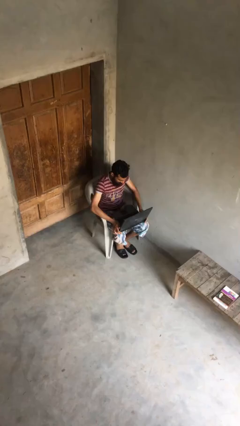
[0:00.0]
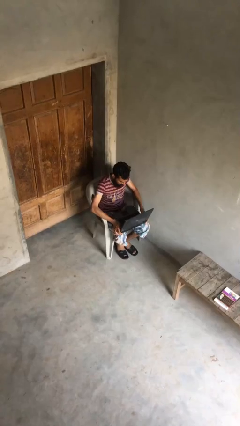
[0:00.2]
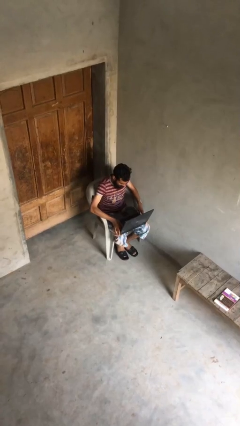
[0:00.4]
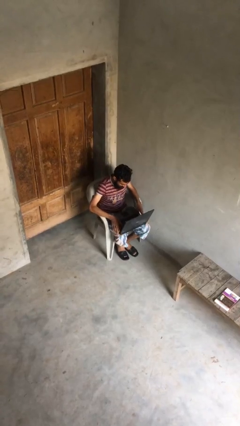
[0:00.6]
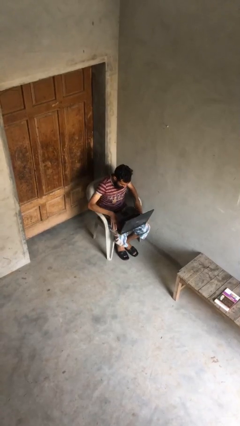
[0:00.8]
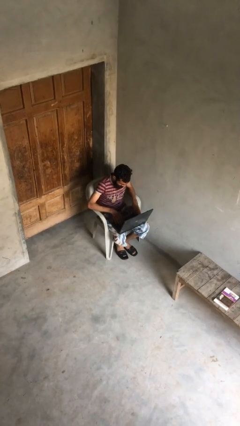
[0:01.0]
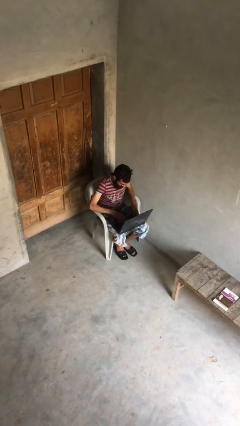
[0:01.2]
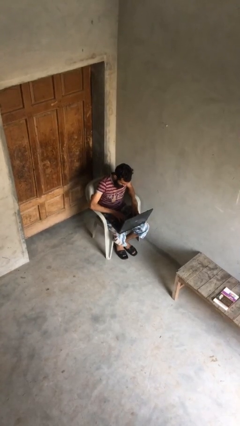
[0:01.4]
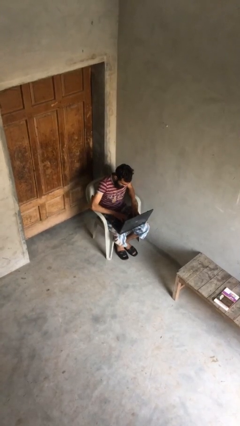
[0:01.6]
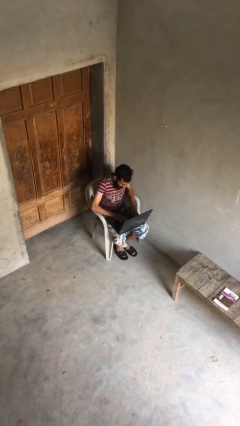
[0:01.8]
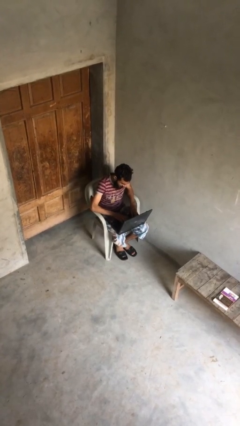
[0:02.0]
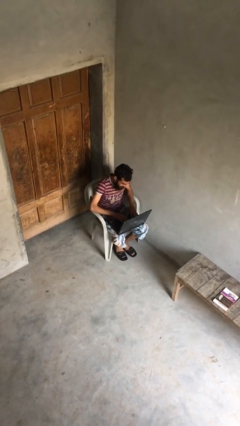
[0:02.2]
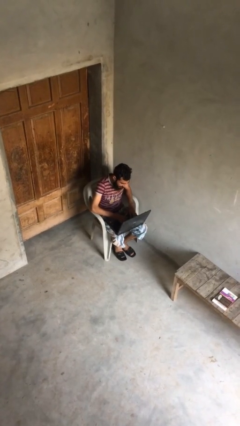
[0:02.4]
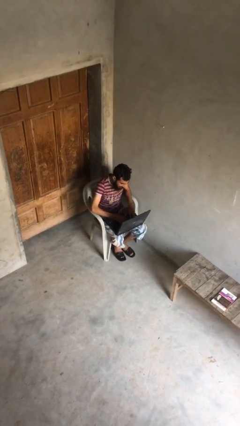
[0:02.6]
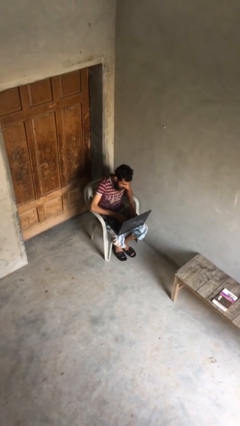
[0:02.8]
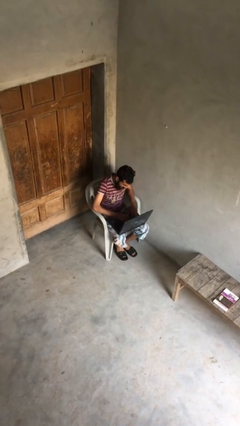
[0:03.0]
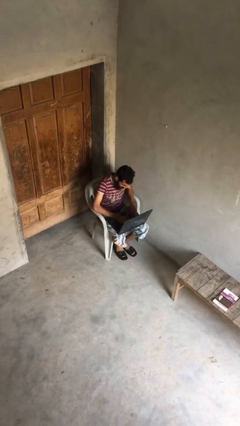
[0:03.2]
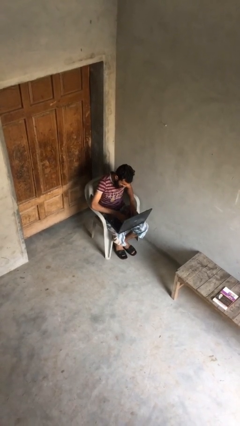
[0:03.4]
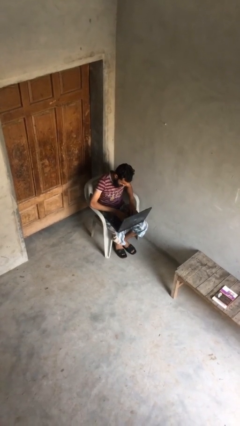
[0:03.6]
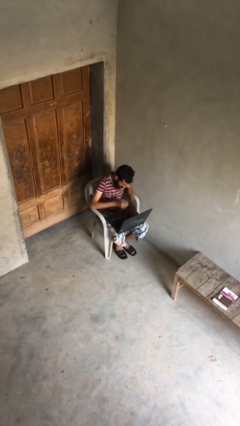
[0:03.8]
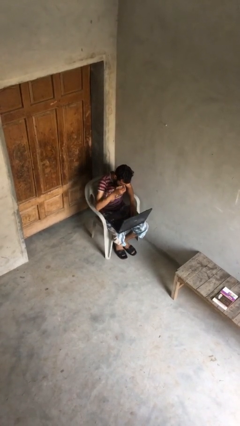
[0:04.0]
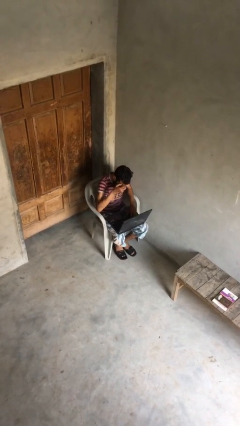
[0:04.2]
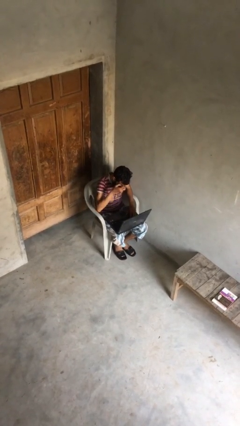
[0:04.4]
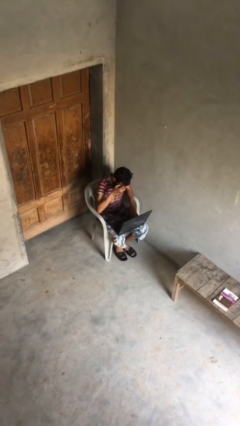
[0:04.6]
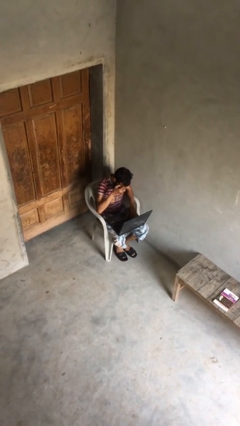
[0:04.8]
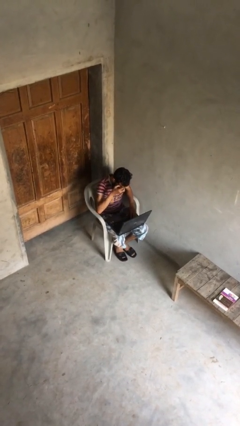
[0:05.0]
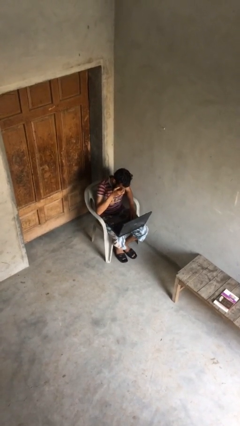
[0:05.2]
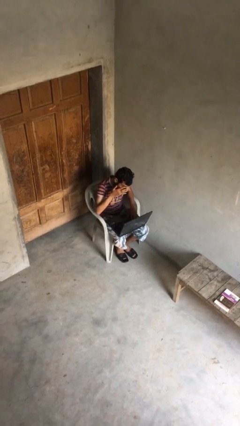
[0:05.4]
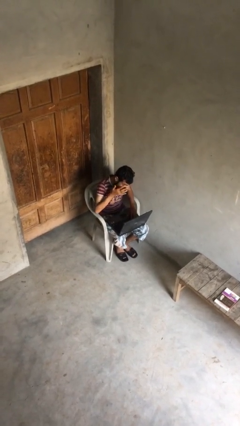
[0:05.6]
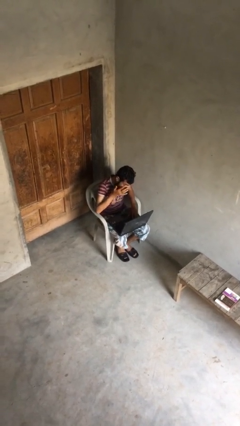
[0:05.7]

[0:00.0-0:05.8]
person interacts with laptop

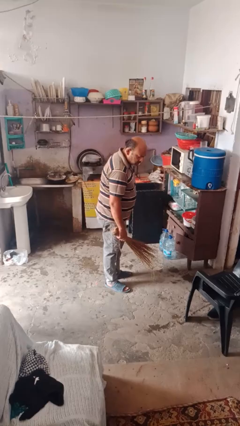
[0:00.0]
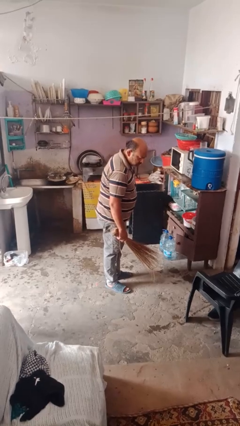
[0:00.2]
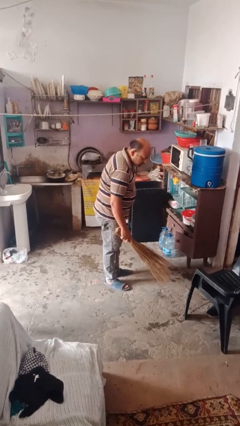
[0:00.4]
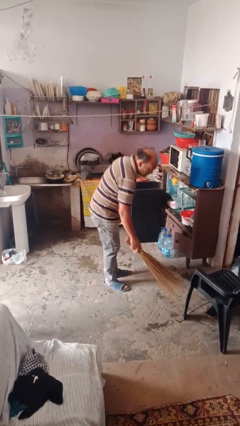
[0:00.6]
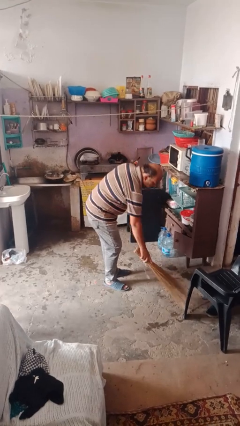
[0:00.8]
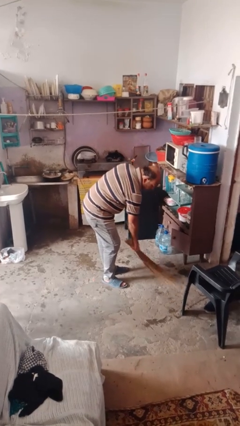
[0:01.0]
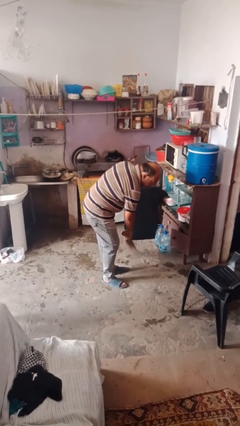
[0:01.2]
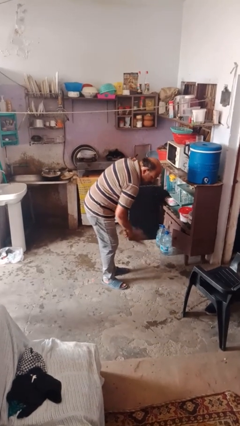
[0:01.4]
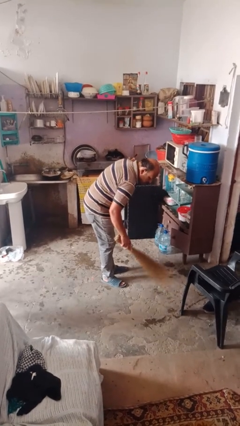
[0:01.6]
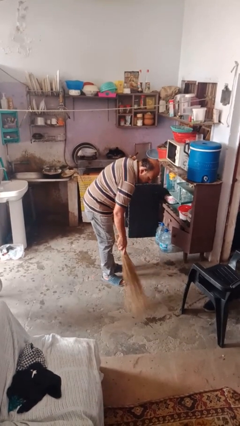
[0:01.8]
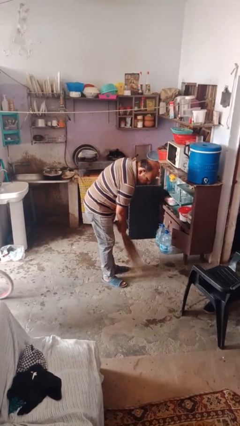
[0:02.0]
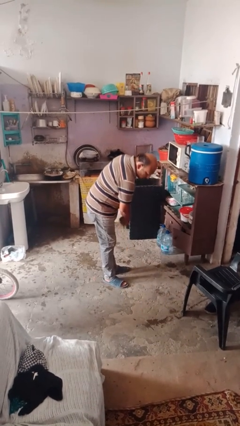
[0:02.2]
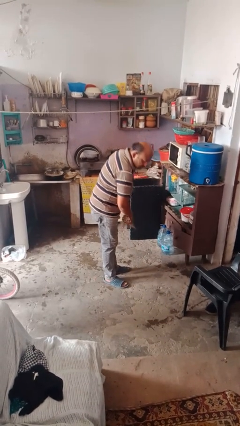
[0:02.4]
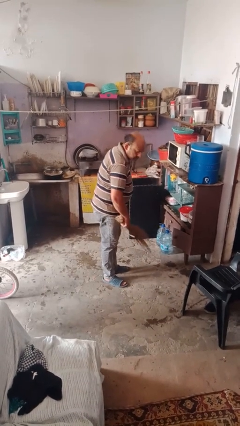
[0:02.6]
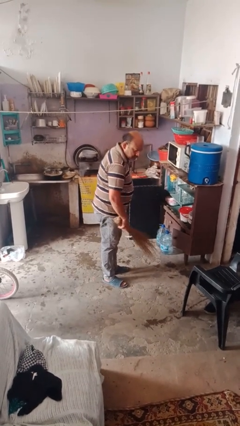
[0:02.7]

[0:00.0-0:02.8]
person sweeps floor

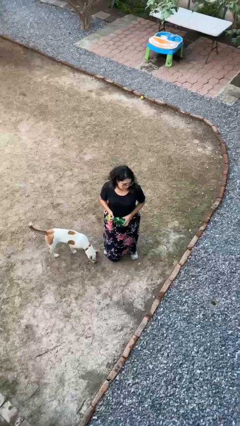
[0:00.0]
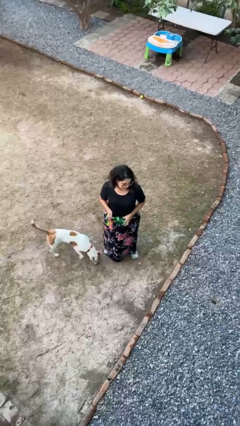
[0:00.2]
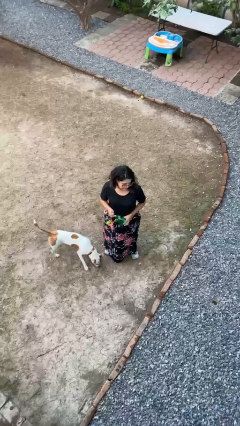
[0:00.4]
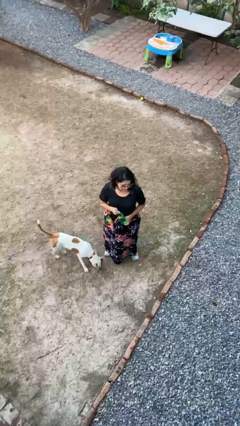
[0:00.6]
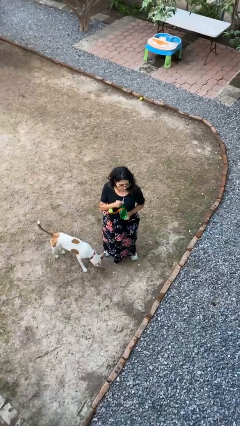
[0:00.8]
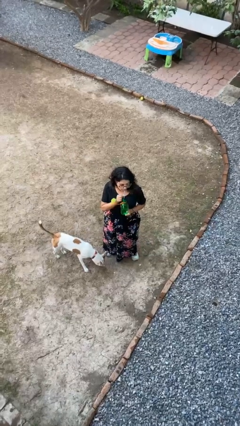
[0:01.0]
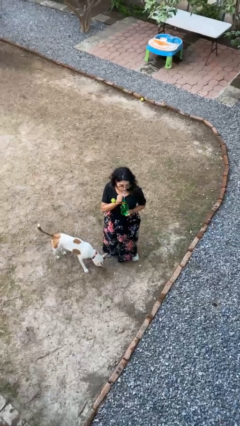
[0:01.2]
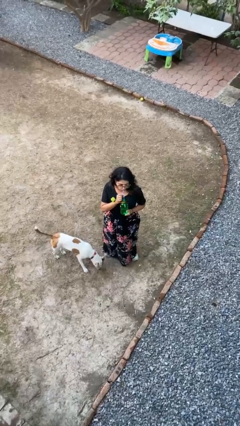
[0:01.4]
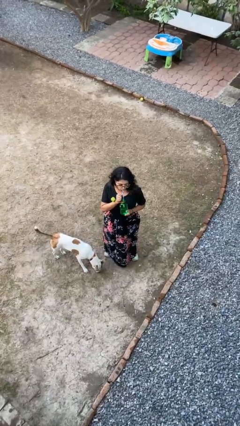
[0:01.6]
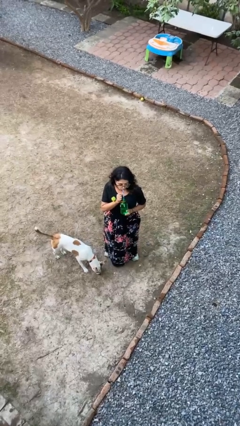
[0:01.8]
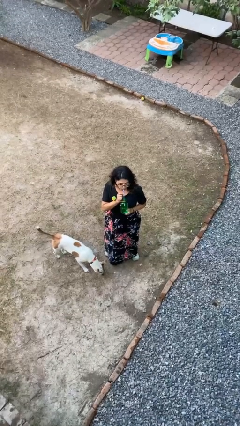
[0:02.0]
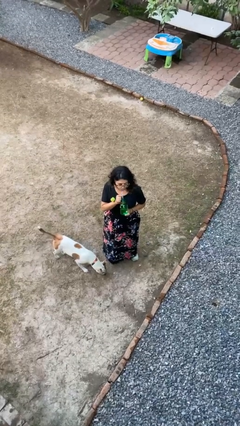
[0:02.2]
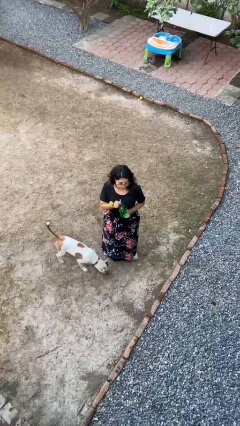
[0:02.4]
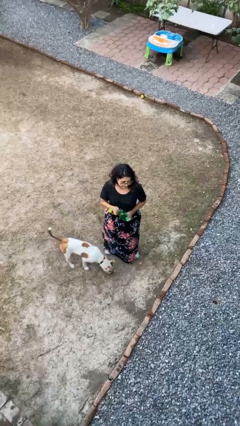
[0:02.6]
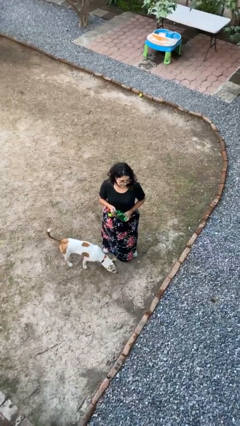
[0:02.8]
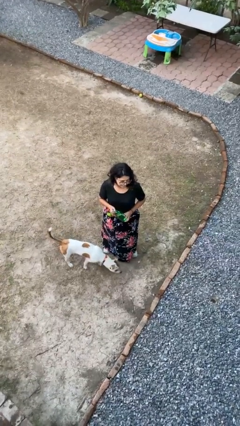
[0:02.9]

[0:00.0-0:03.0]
person drinks from straw

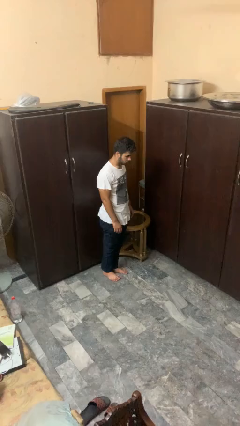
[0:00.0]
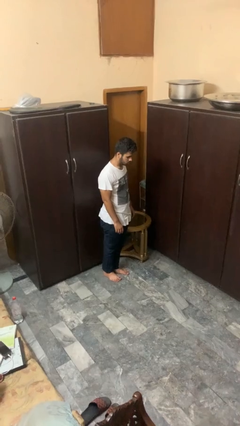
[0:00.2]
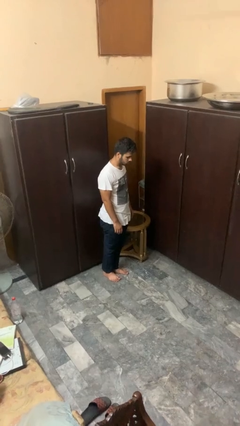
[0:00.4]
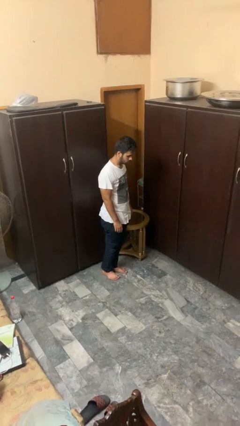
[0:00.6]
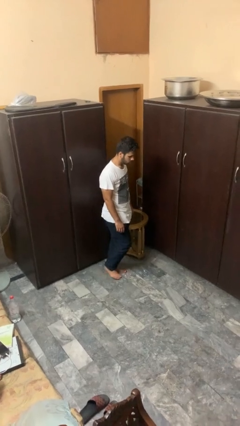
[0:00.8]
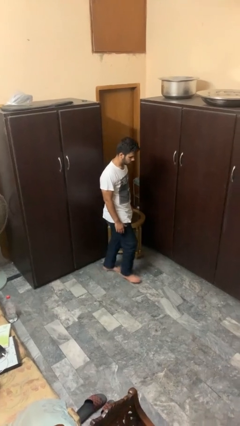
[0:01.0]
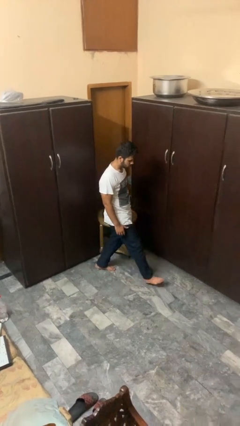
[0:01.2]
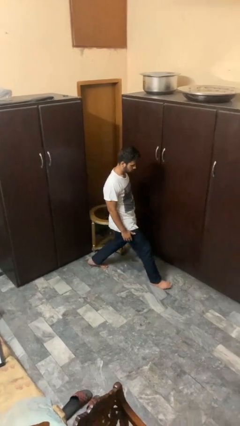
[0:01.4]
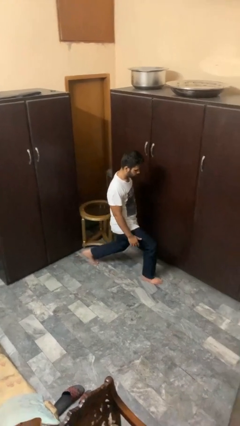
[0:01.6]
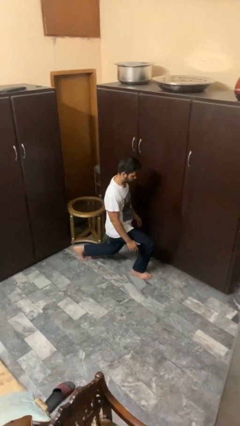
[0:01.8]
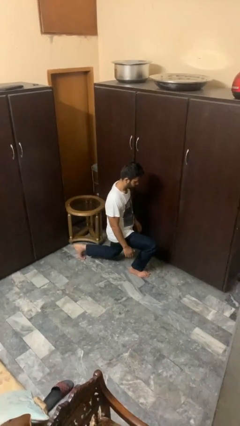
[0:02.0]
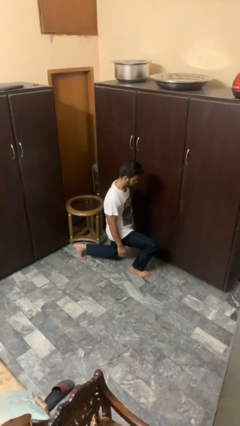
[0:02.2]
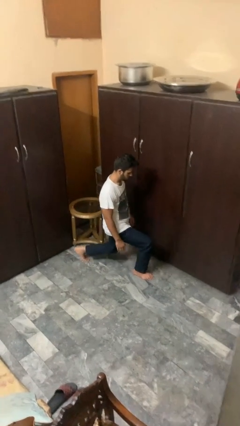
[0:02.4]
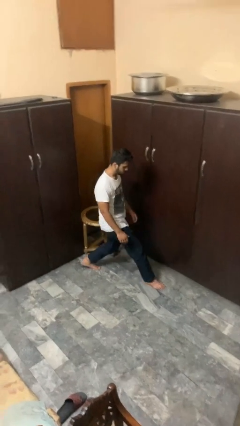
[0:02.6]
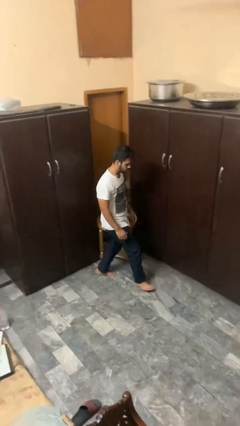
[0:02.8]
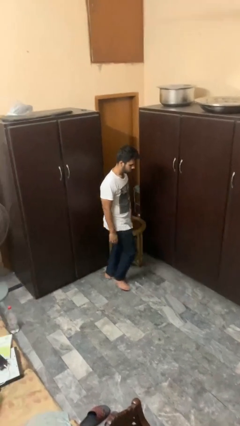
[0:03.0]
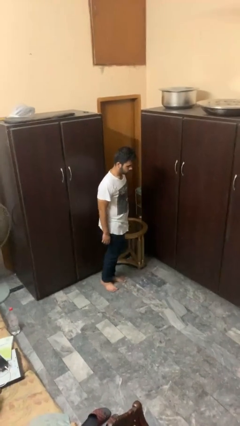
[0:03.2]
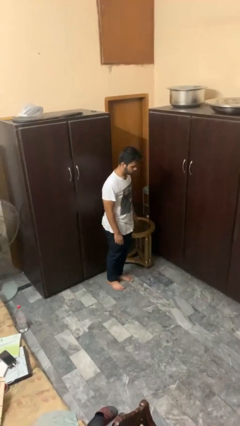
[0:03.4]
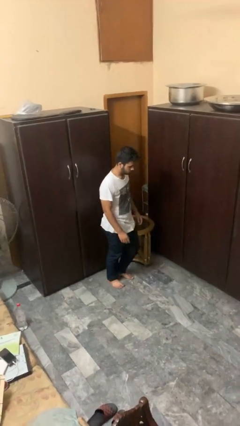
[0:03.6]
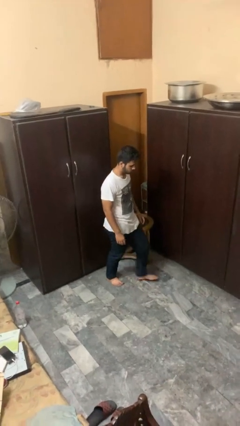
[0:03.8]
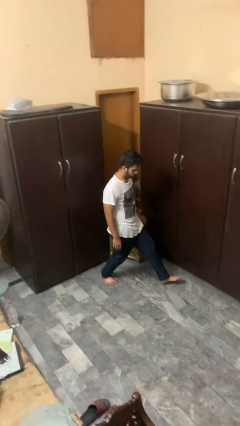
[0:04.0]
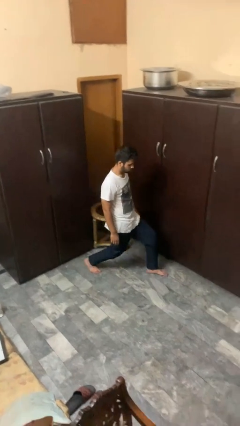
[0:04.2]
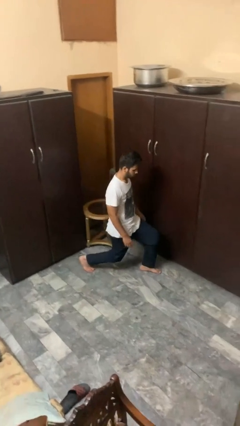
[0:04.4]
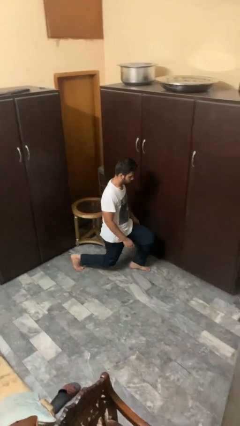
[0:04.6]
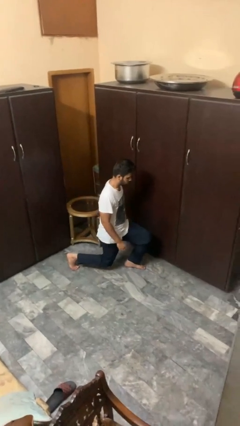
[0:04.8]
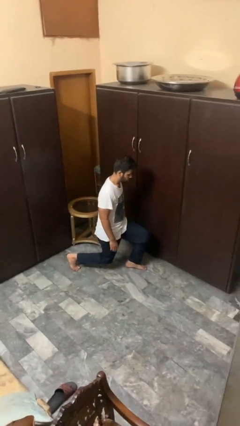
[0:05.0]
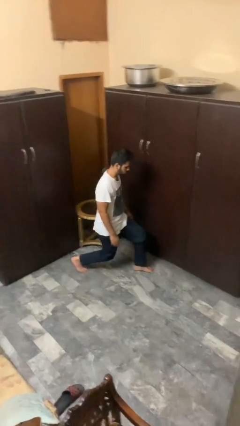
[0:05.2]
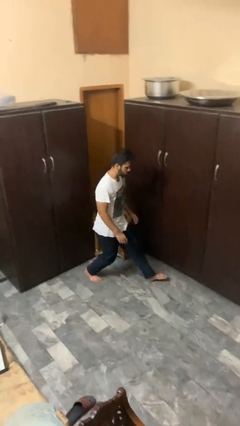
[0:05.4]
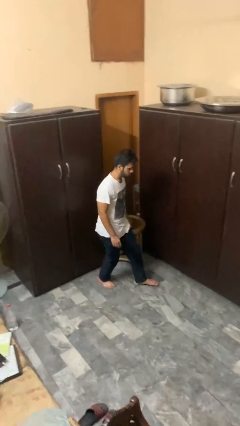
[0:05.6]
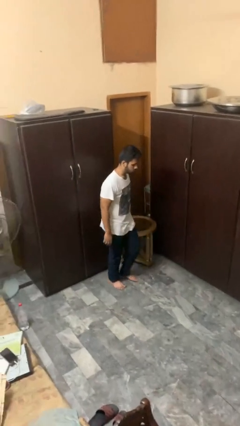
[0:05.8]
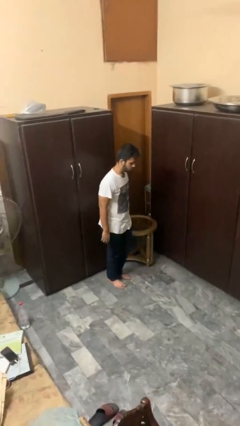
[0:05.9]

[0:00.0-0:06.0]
person exercises with lunges

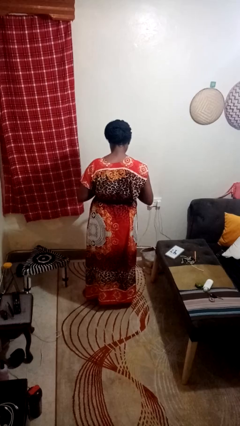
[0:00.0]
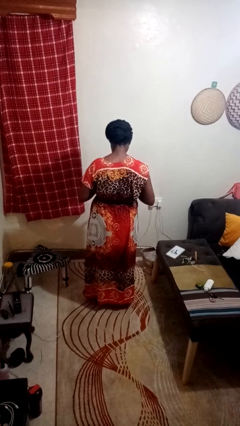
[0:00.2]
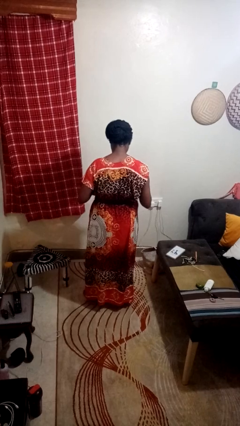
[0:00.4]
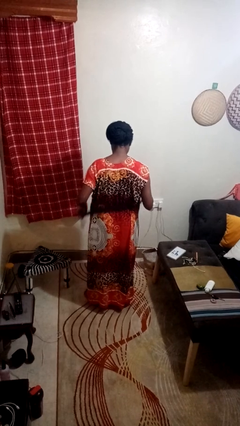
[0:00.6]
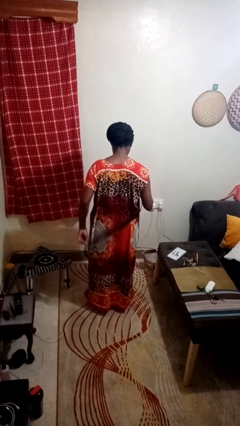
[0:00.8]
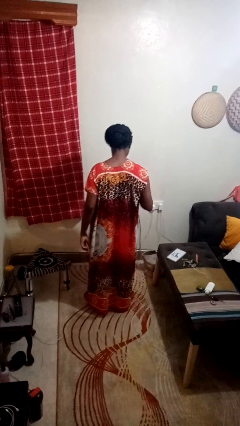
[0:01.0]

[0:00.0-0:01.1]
person takes off belt
